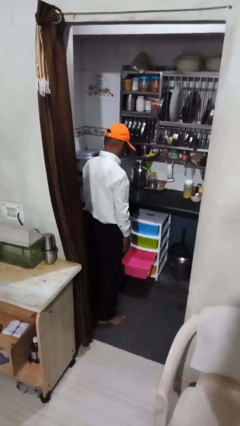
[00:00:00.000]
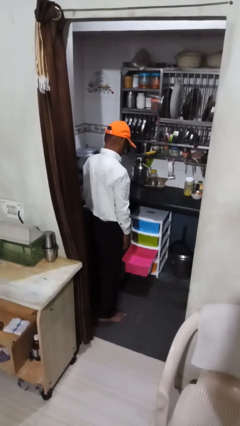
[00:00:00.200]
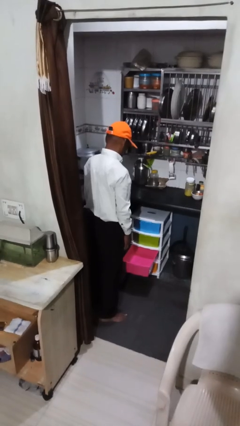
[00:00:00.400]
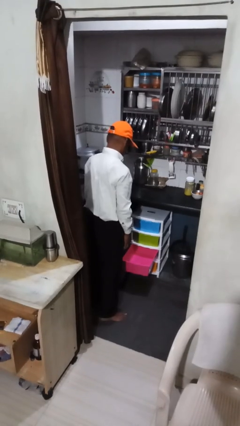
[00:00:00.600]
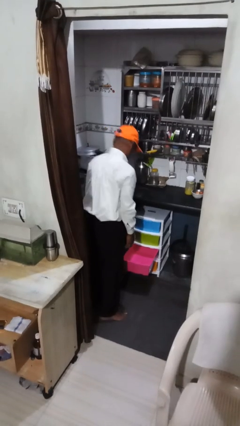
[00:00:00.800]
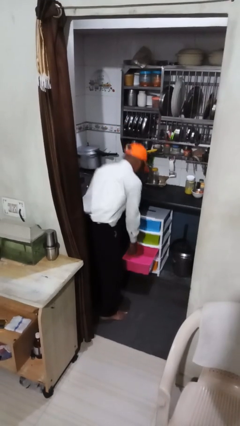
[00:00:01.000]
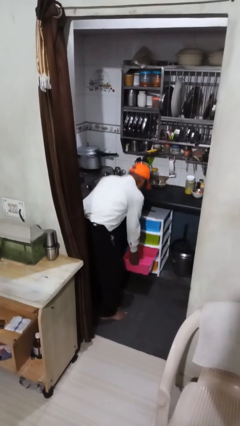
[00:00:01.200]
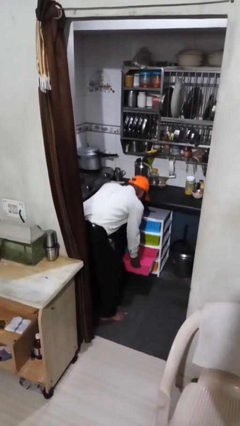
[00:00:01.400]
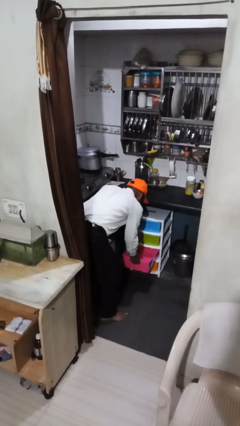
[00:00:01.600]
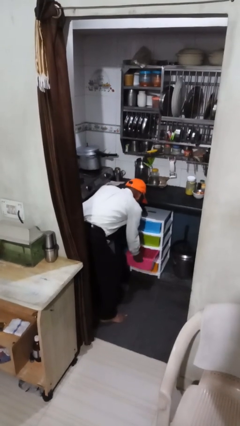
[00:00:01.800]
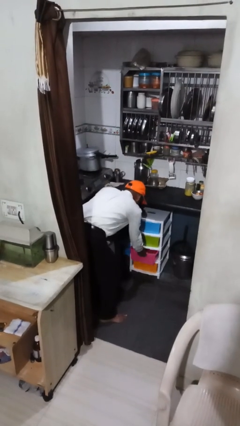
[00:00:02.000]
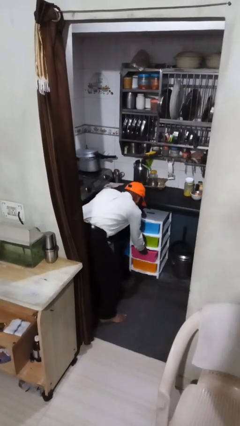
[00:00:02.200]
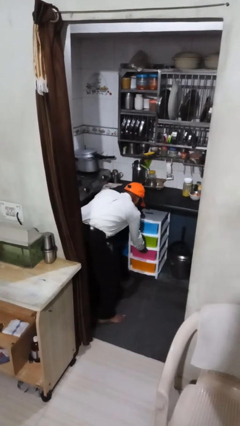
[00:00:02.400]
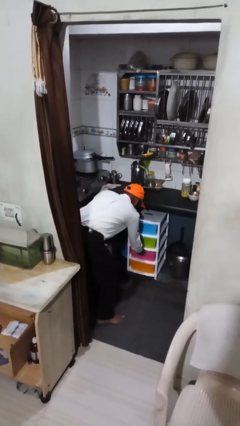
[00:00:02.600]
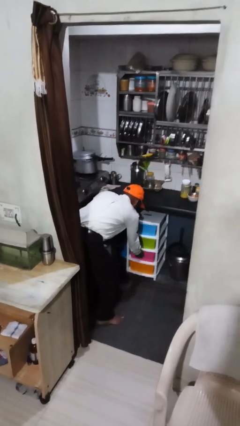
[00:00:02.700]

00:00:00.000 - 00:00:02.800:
person closes kitchen drawer

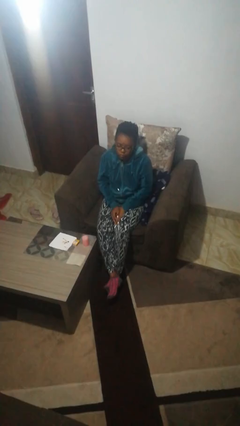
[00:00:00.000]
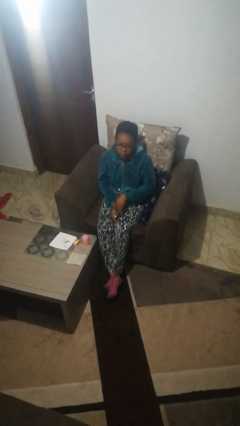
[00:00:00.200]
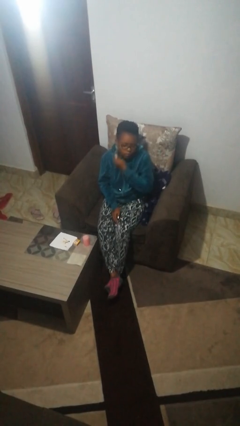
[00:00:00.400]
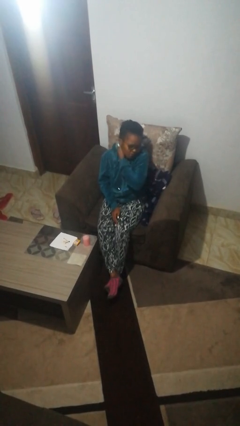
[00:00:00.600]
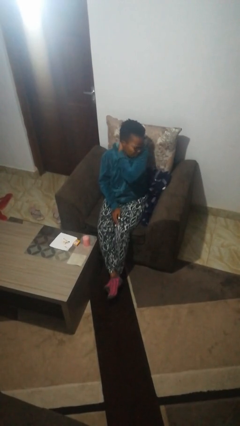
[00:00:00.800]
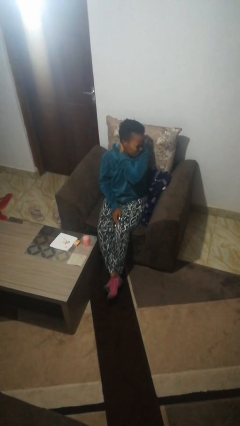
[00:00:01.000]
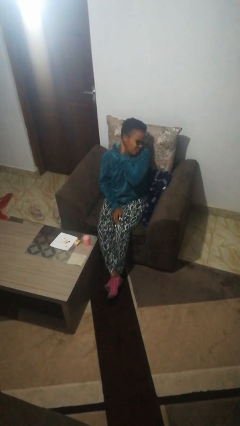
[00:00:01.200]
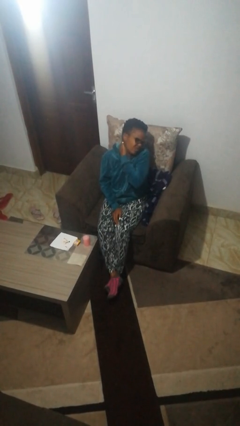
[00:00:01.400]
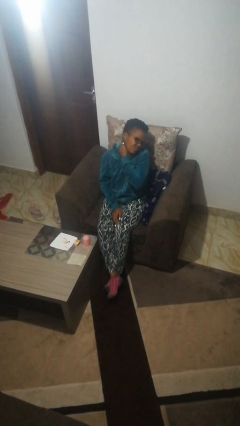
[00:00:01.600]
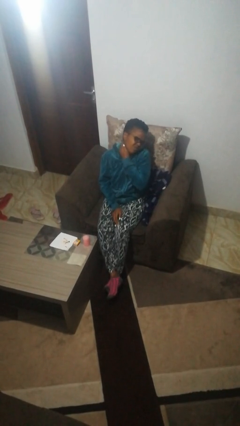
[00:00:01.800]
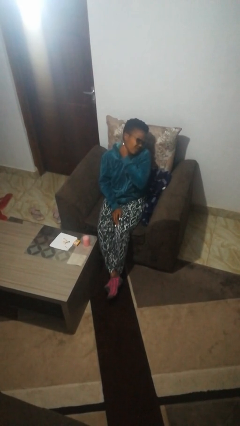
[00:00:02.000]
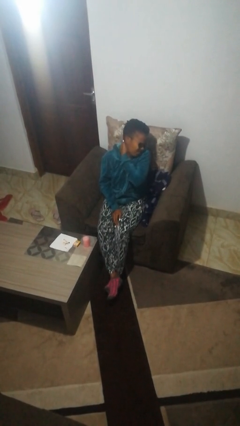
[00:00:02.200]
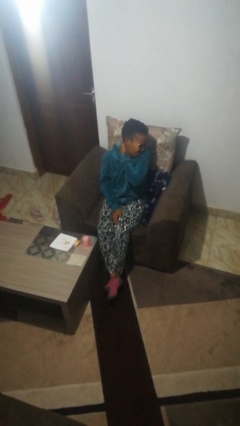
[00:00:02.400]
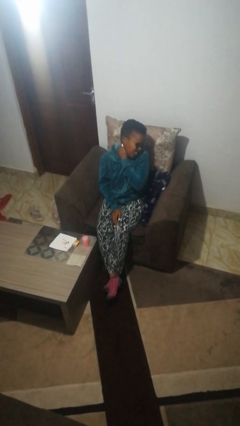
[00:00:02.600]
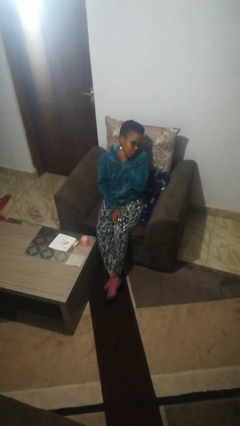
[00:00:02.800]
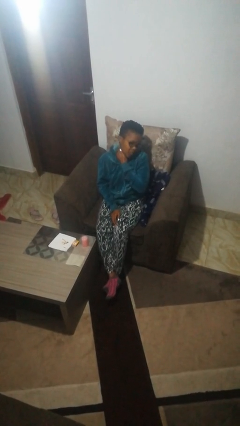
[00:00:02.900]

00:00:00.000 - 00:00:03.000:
person rubs neck

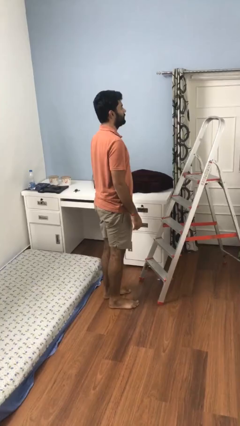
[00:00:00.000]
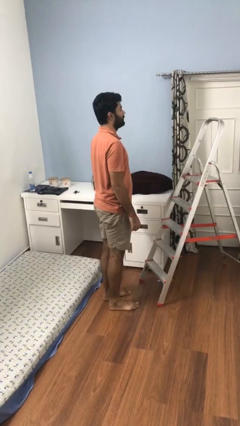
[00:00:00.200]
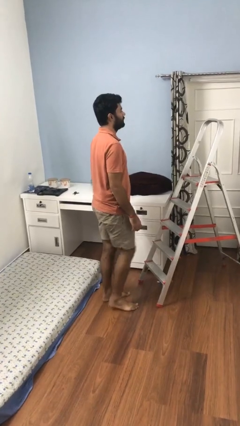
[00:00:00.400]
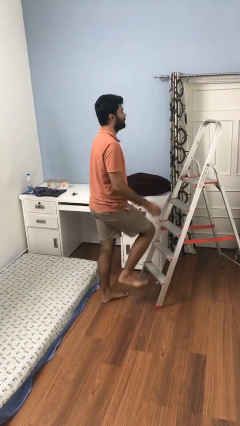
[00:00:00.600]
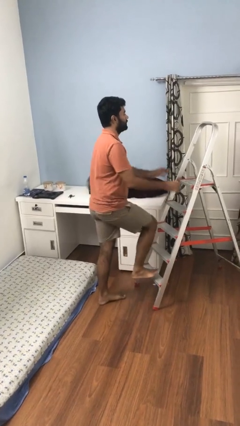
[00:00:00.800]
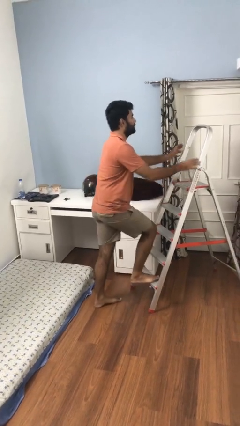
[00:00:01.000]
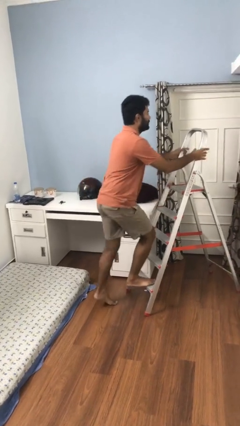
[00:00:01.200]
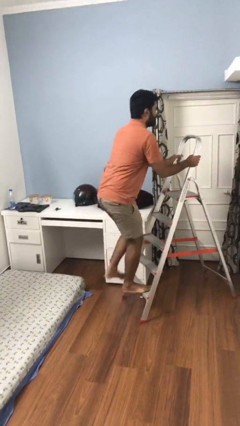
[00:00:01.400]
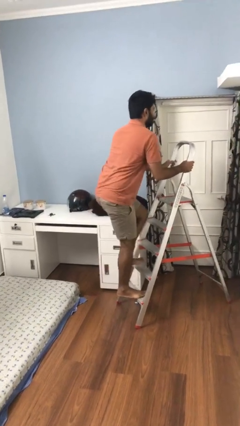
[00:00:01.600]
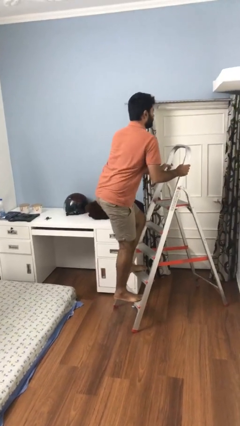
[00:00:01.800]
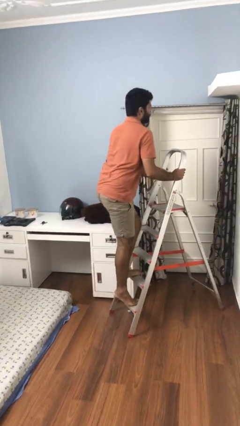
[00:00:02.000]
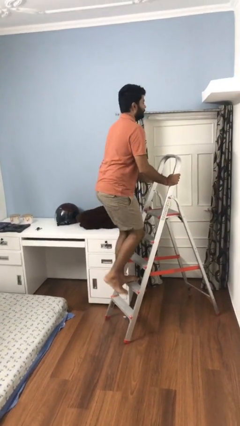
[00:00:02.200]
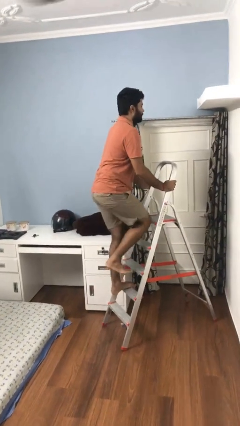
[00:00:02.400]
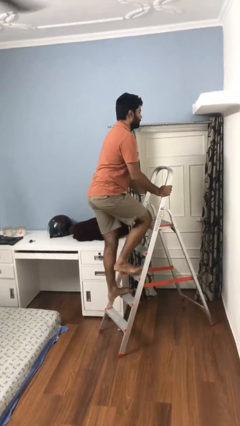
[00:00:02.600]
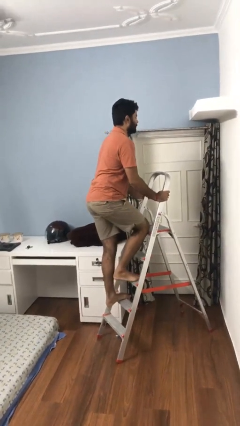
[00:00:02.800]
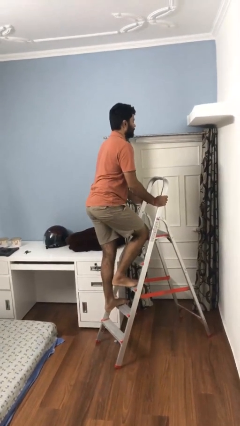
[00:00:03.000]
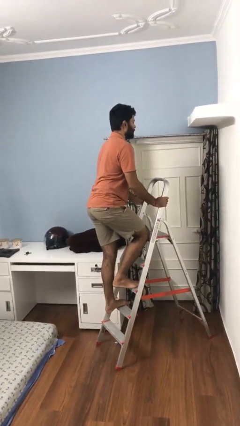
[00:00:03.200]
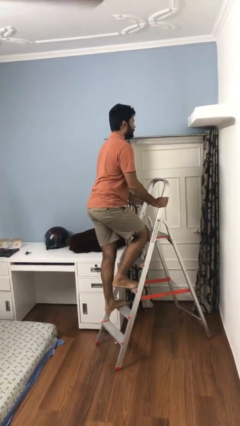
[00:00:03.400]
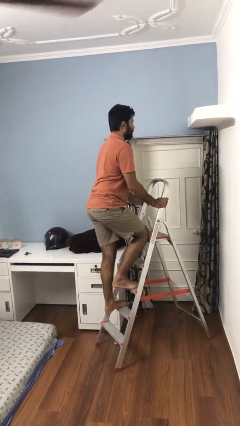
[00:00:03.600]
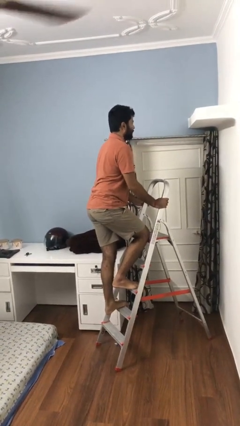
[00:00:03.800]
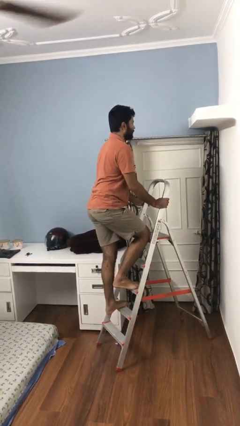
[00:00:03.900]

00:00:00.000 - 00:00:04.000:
person climbs up ladder

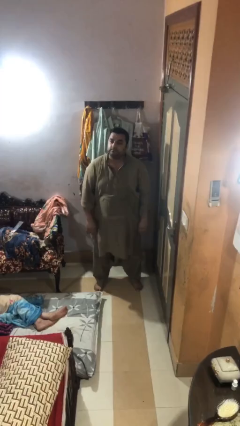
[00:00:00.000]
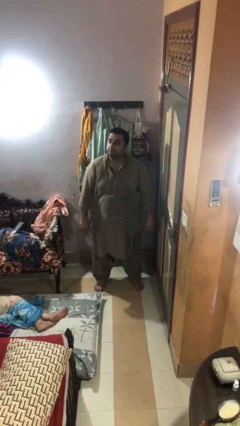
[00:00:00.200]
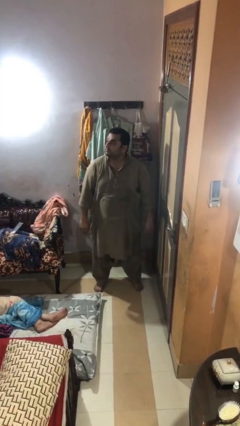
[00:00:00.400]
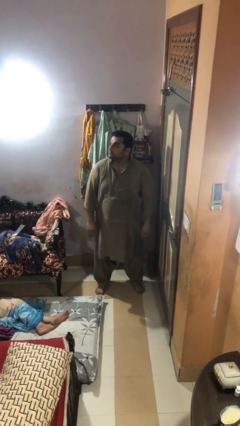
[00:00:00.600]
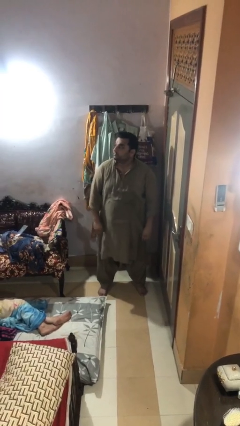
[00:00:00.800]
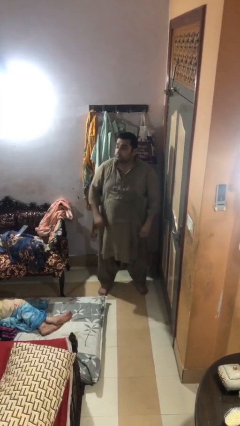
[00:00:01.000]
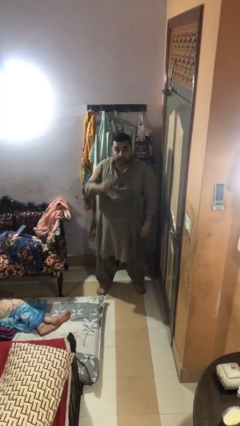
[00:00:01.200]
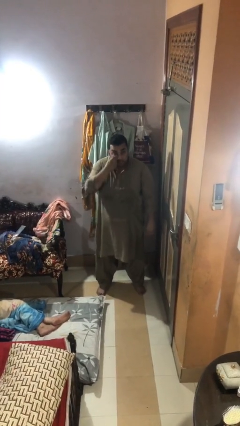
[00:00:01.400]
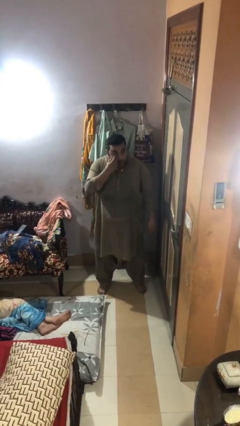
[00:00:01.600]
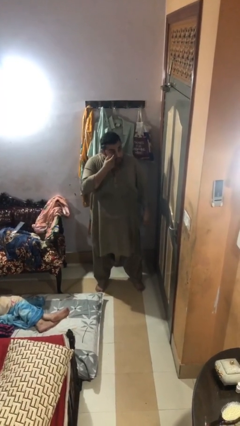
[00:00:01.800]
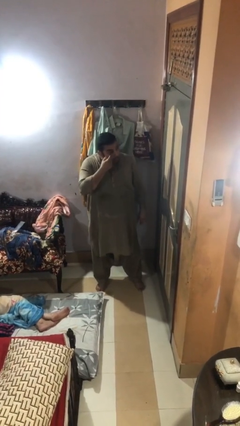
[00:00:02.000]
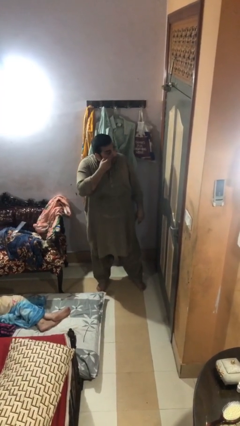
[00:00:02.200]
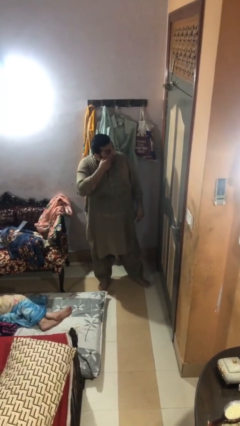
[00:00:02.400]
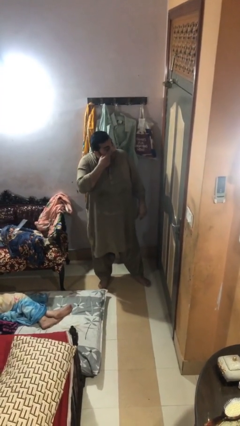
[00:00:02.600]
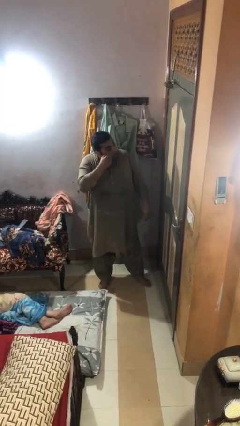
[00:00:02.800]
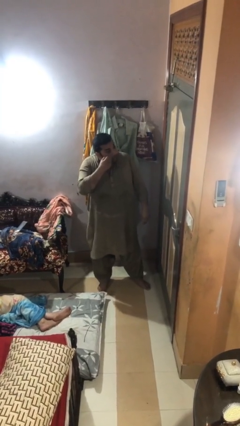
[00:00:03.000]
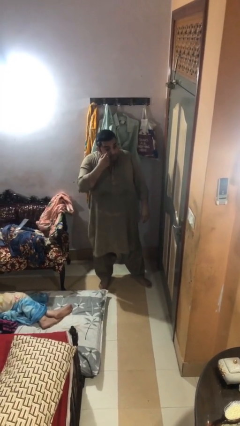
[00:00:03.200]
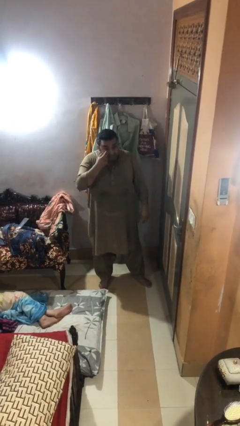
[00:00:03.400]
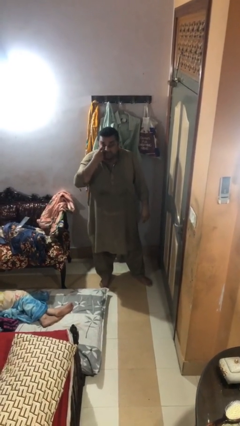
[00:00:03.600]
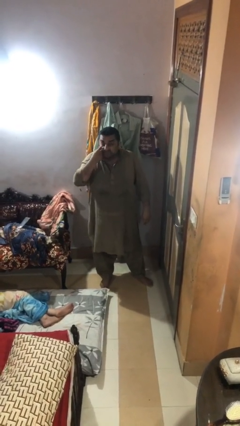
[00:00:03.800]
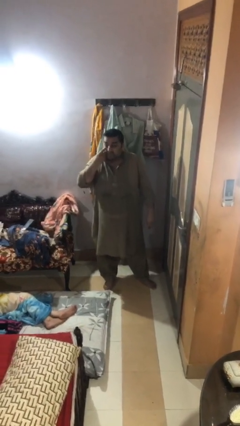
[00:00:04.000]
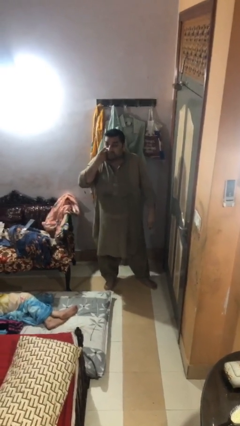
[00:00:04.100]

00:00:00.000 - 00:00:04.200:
person scratches face

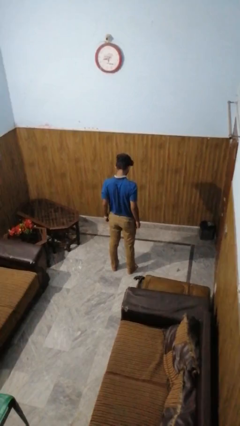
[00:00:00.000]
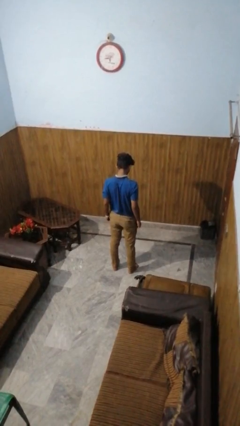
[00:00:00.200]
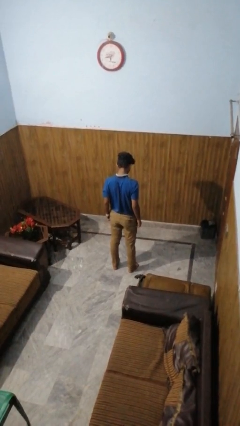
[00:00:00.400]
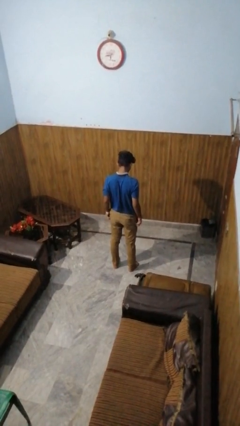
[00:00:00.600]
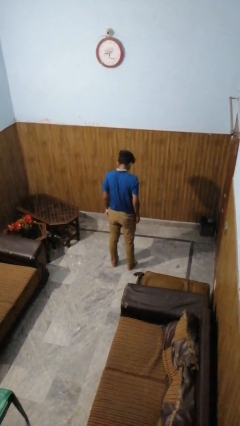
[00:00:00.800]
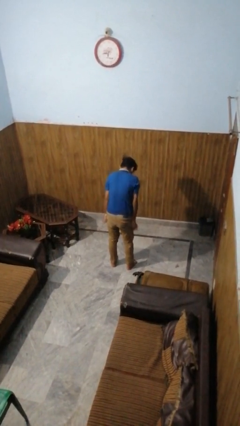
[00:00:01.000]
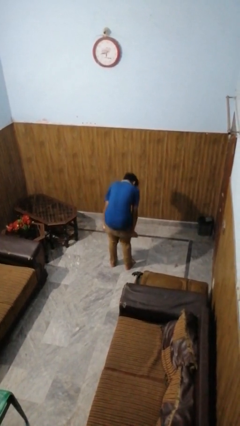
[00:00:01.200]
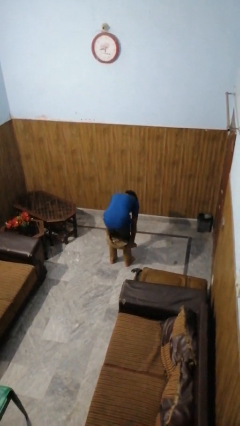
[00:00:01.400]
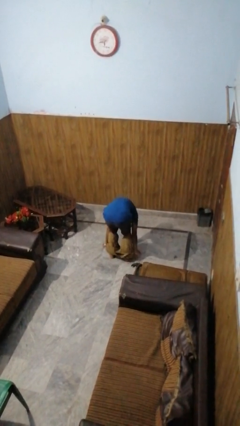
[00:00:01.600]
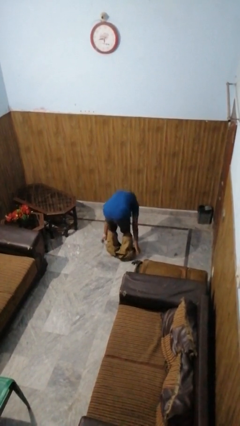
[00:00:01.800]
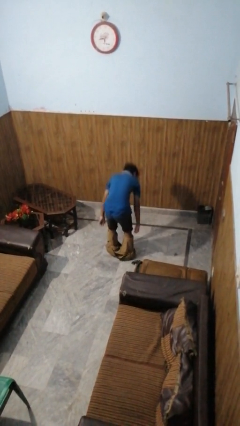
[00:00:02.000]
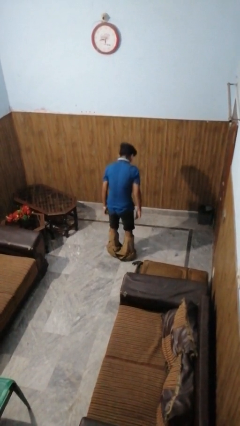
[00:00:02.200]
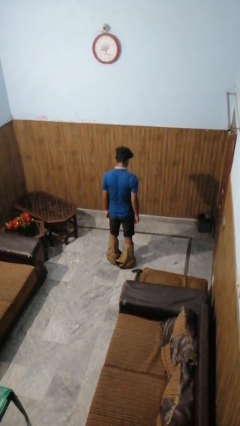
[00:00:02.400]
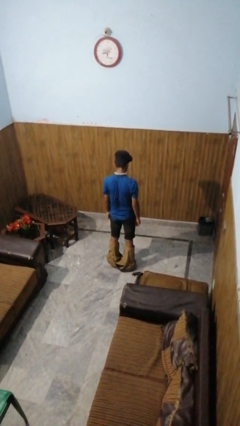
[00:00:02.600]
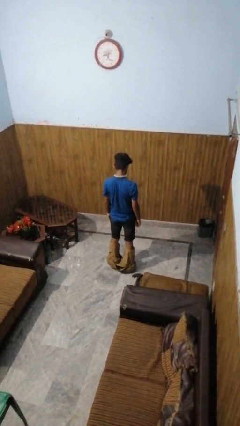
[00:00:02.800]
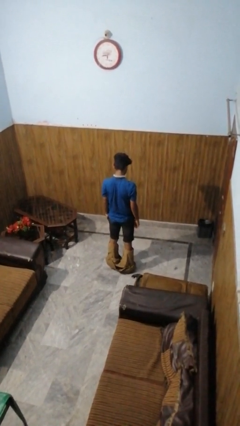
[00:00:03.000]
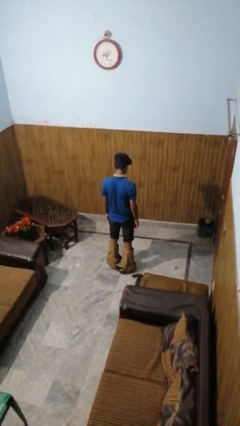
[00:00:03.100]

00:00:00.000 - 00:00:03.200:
person takes off pants
